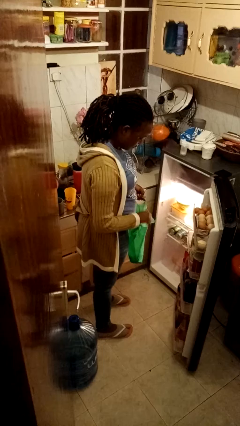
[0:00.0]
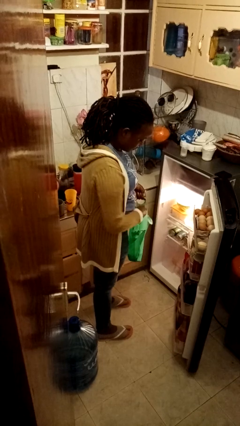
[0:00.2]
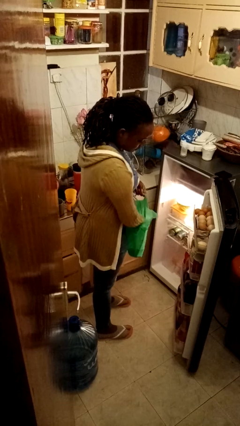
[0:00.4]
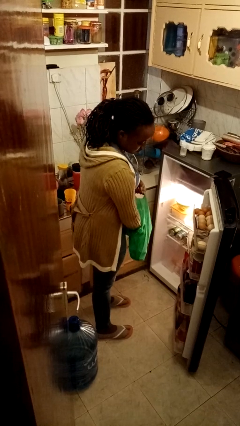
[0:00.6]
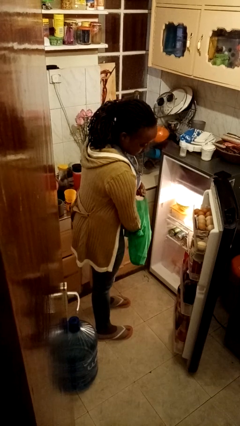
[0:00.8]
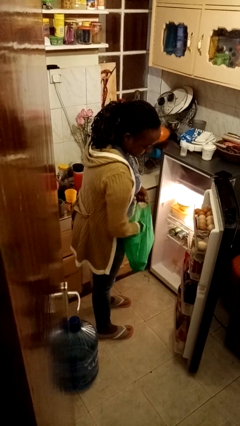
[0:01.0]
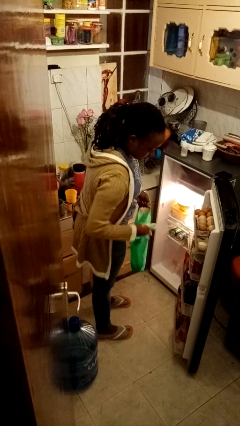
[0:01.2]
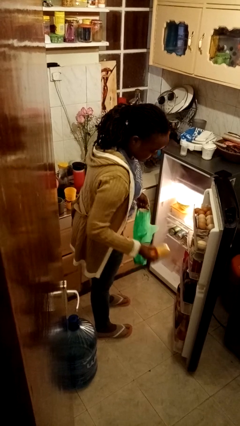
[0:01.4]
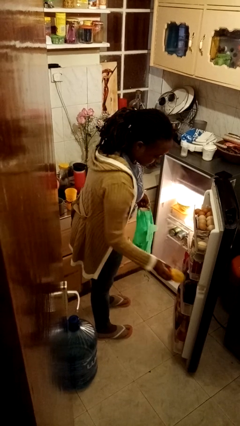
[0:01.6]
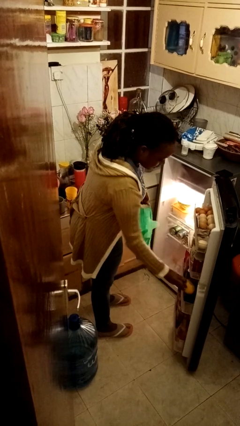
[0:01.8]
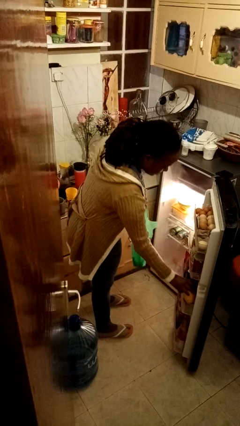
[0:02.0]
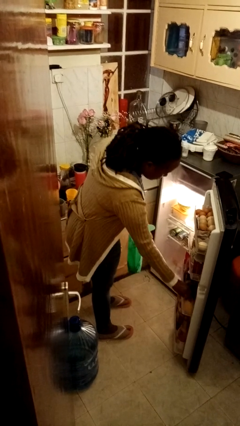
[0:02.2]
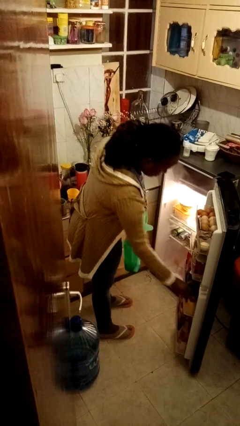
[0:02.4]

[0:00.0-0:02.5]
person loads groceries into refrigerator

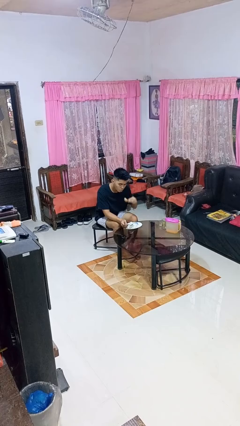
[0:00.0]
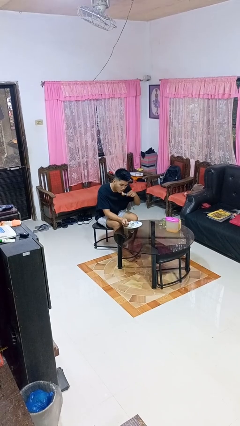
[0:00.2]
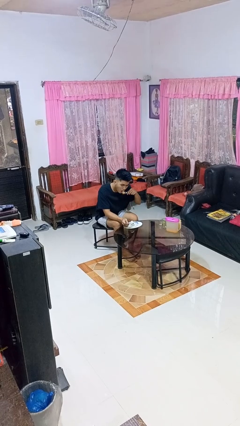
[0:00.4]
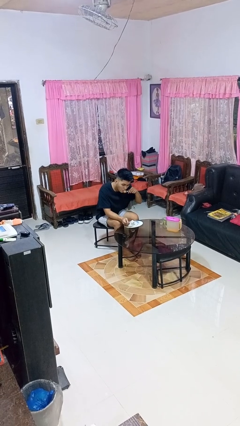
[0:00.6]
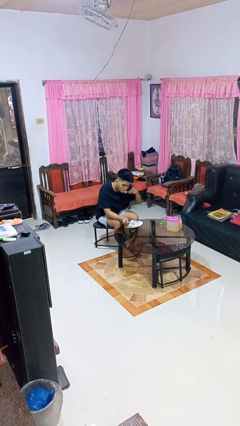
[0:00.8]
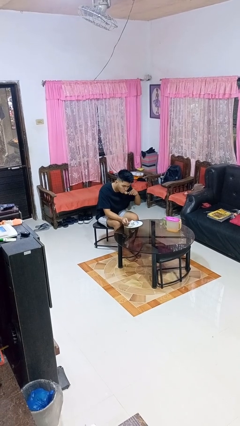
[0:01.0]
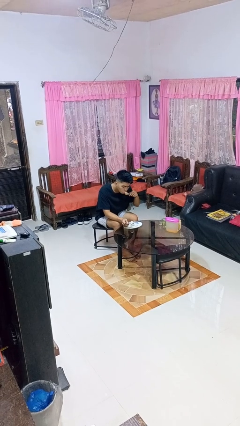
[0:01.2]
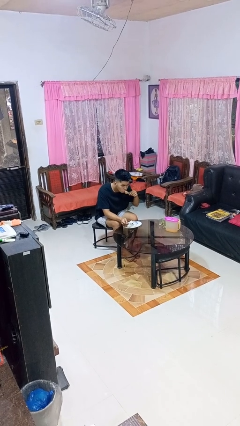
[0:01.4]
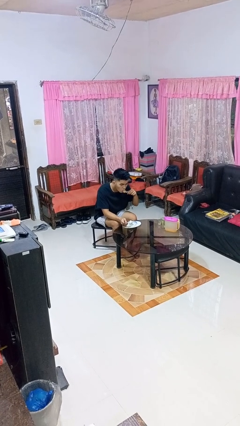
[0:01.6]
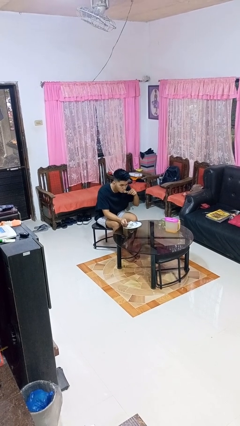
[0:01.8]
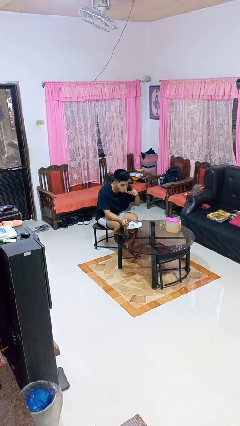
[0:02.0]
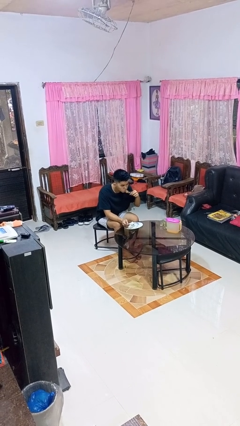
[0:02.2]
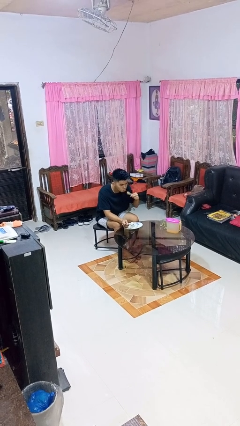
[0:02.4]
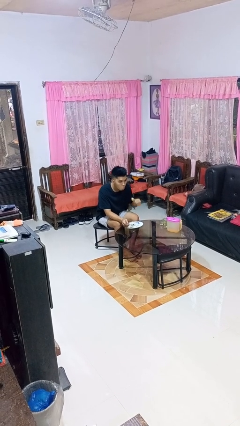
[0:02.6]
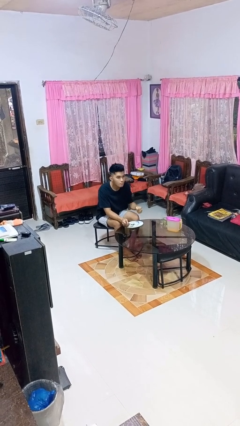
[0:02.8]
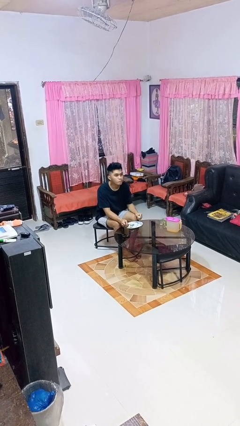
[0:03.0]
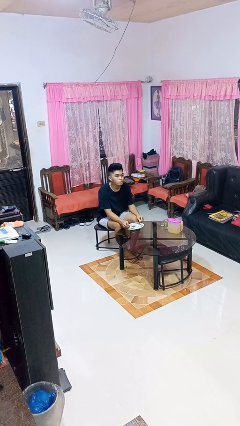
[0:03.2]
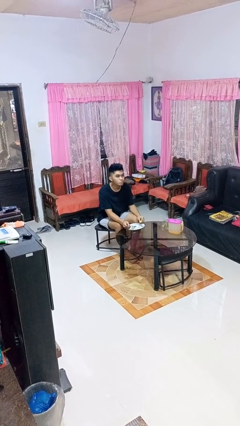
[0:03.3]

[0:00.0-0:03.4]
person eats with utensil

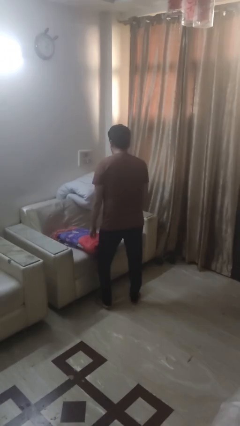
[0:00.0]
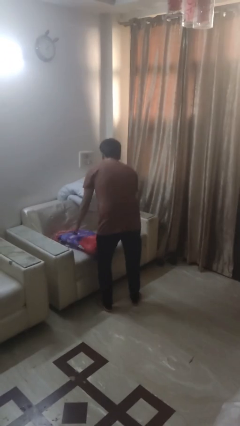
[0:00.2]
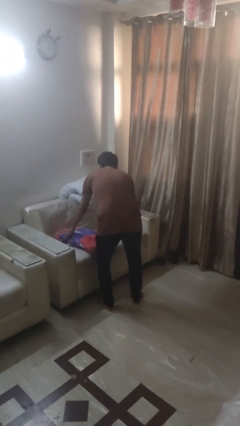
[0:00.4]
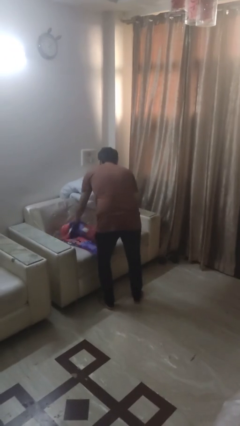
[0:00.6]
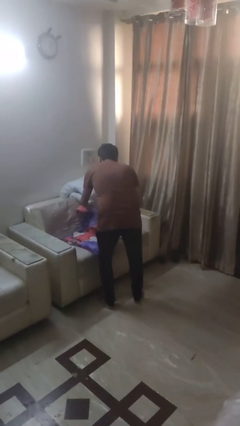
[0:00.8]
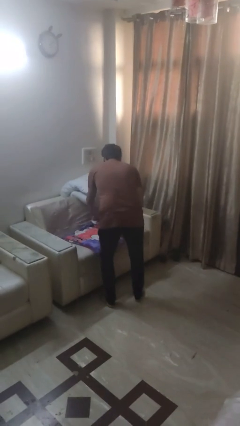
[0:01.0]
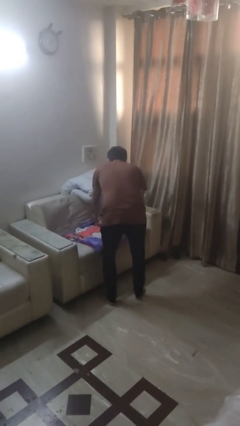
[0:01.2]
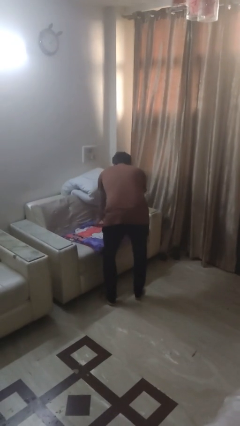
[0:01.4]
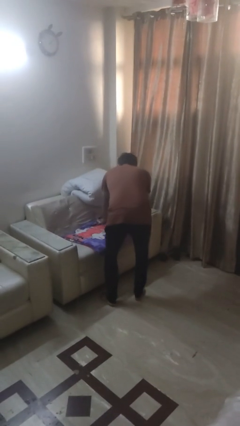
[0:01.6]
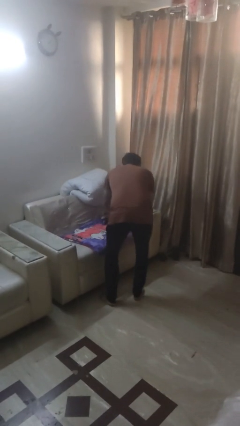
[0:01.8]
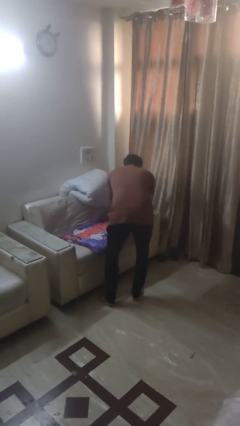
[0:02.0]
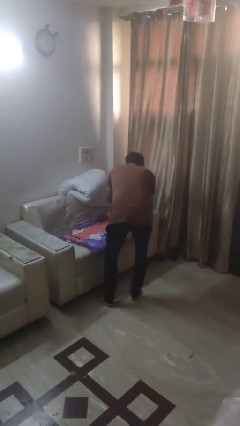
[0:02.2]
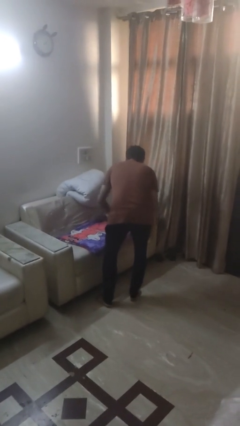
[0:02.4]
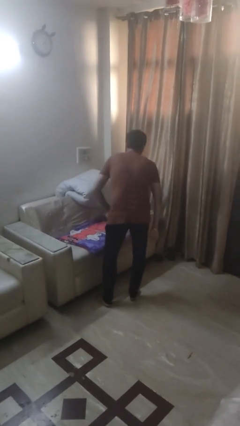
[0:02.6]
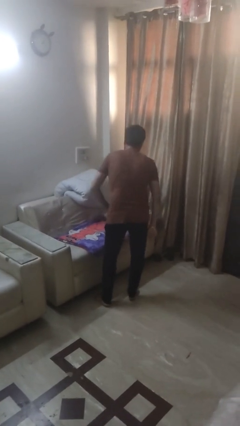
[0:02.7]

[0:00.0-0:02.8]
person unfolds blanket

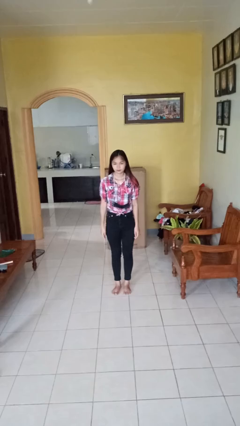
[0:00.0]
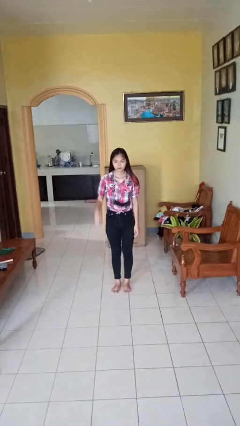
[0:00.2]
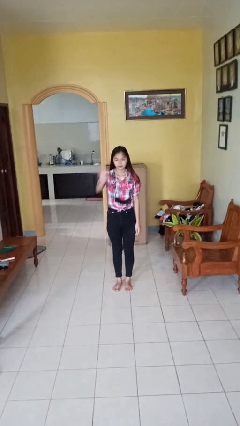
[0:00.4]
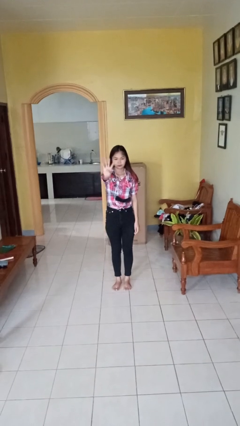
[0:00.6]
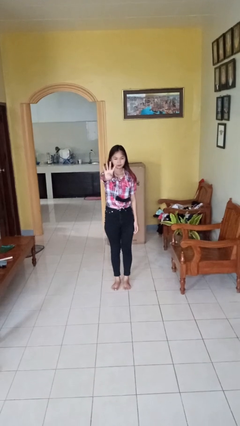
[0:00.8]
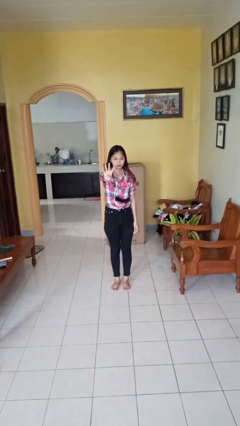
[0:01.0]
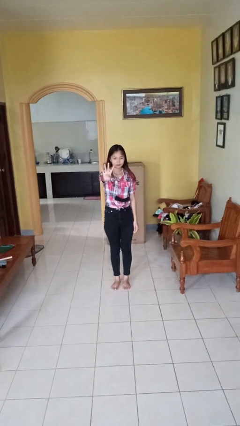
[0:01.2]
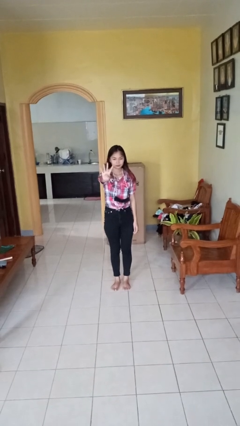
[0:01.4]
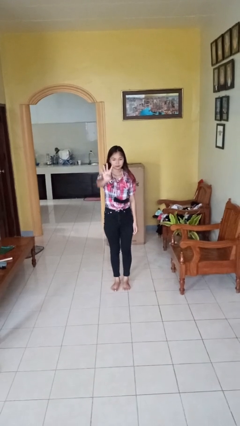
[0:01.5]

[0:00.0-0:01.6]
person gestures number four

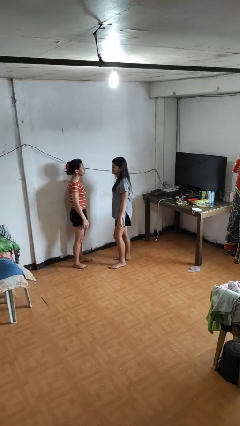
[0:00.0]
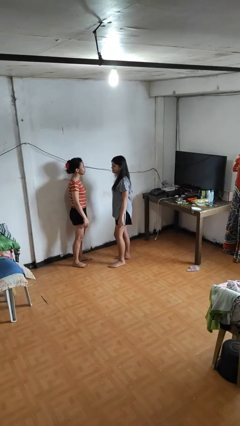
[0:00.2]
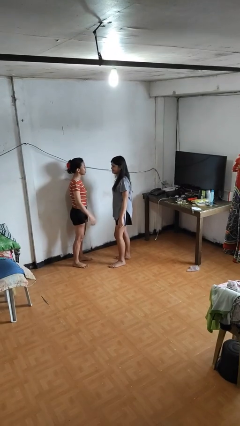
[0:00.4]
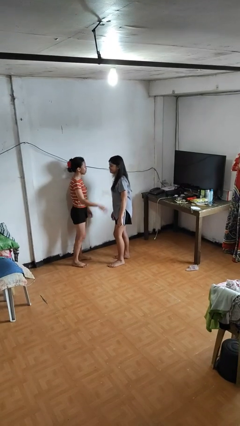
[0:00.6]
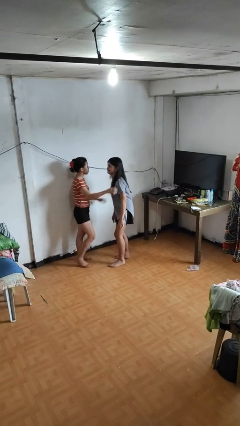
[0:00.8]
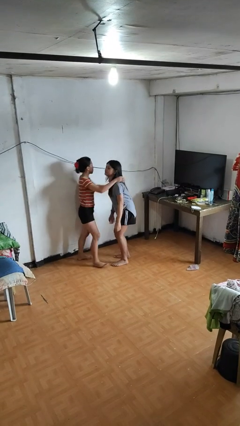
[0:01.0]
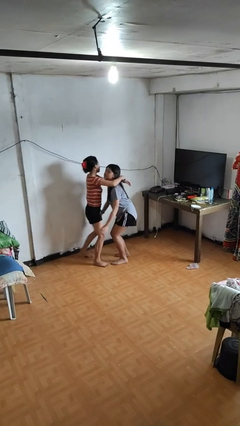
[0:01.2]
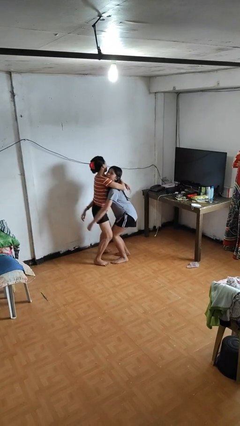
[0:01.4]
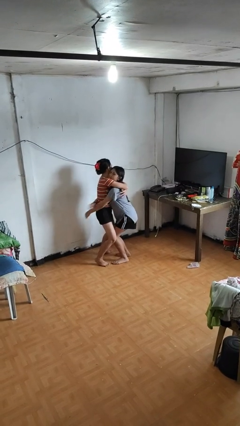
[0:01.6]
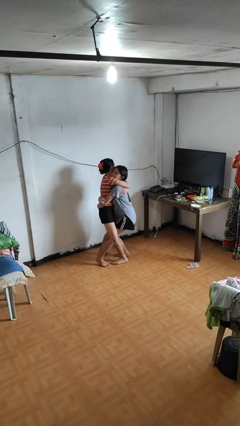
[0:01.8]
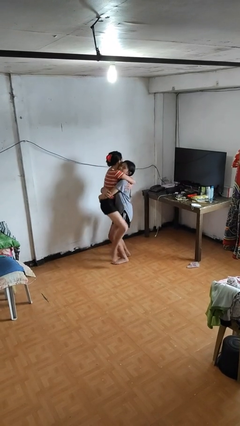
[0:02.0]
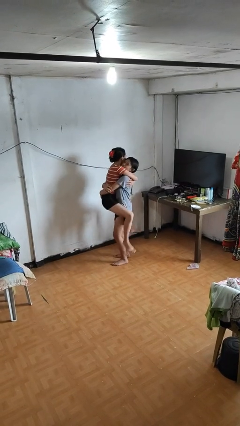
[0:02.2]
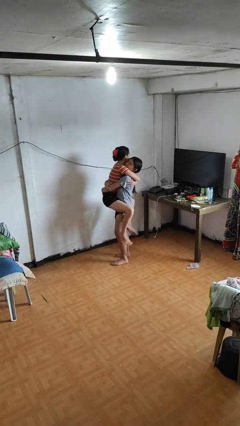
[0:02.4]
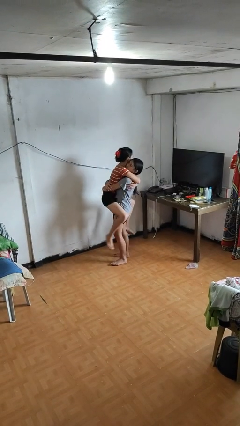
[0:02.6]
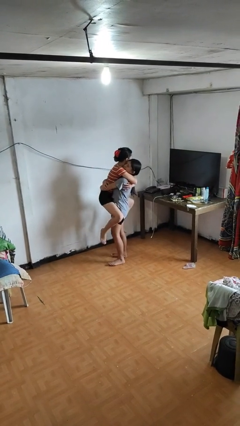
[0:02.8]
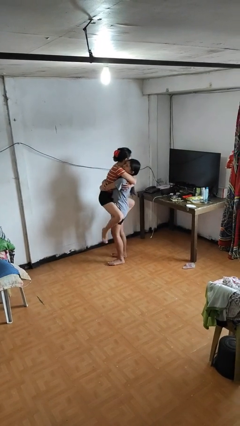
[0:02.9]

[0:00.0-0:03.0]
person picks up person

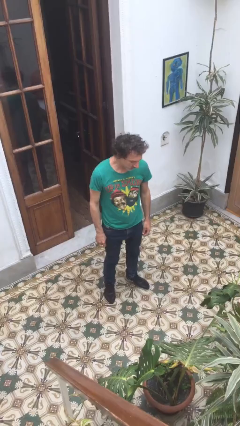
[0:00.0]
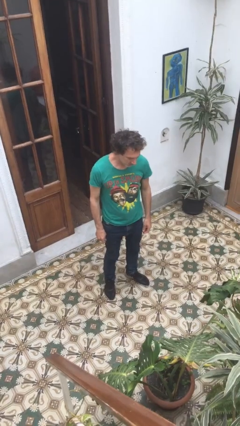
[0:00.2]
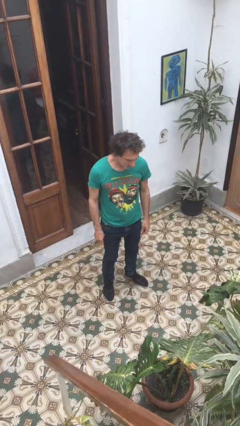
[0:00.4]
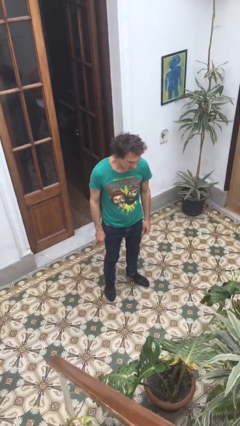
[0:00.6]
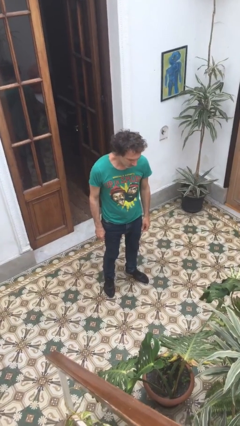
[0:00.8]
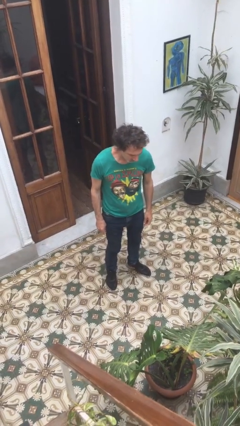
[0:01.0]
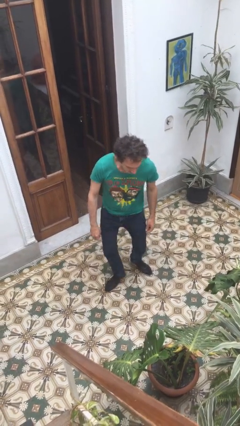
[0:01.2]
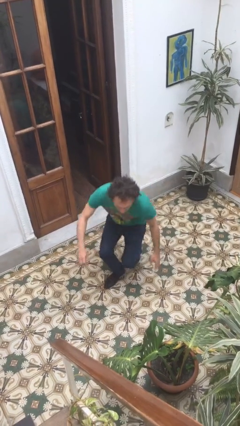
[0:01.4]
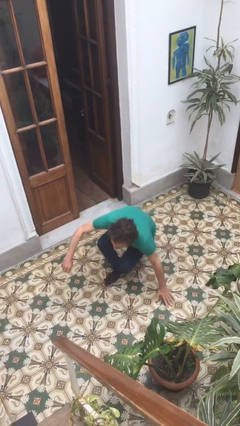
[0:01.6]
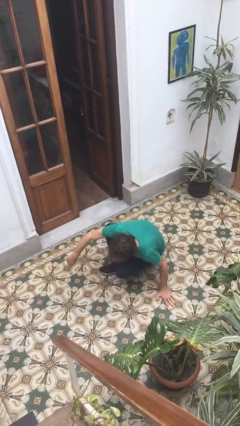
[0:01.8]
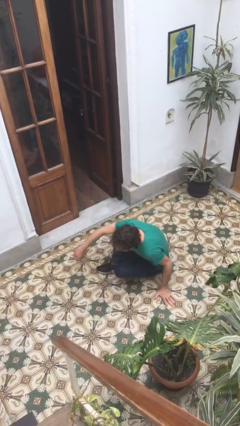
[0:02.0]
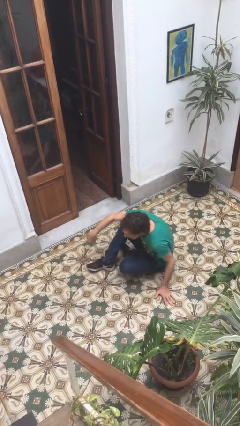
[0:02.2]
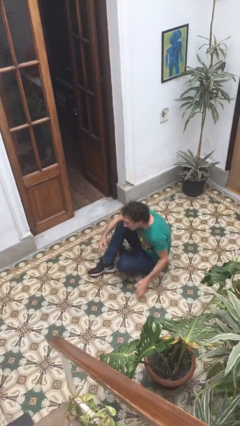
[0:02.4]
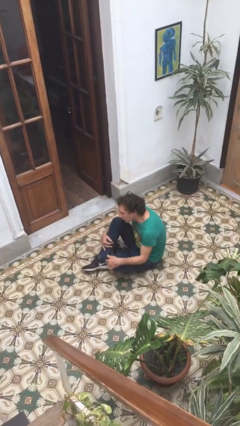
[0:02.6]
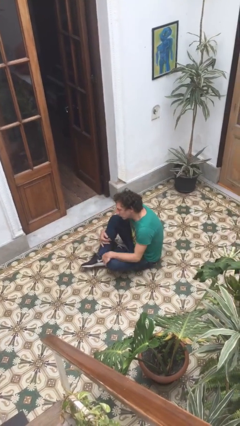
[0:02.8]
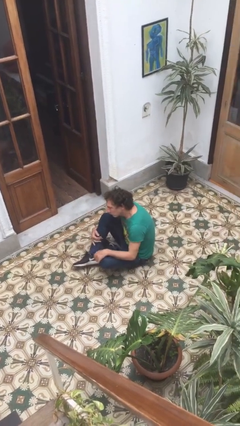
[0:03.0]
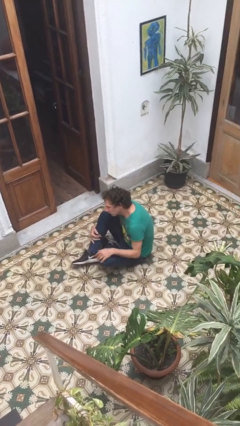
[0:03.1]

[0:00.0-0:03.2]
person sits down

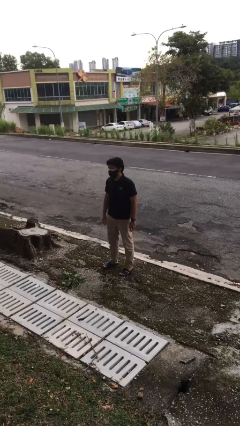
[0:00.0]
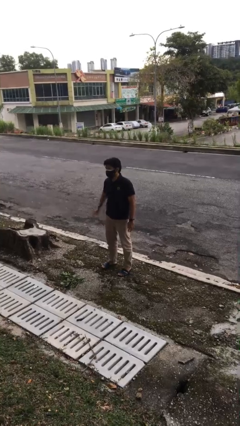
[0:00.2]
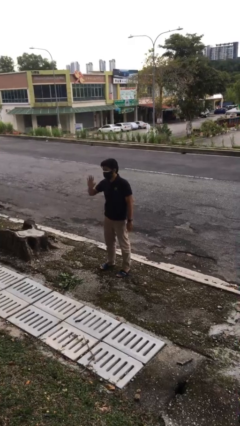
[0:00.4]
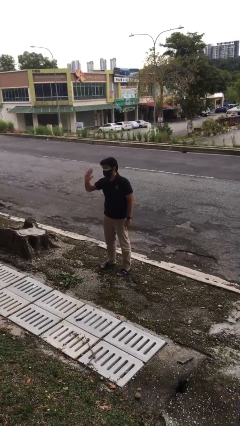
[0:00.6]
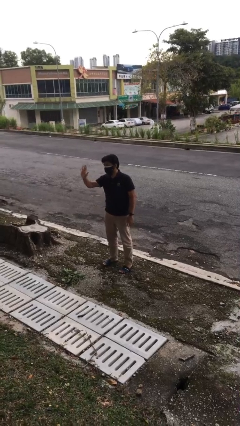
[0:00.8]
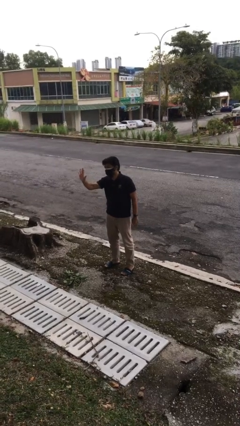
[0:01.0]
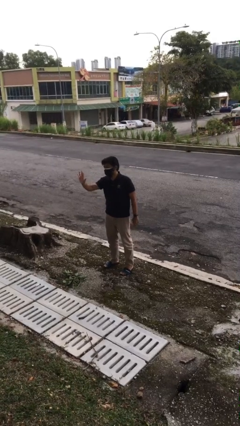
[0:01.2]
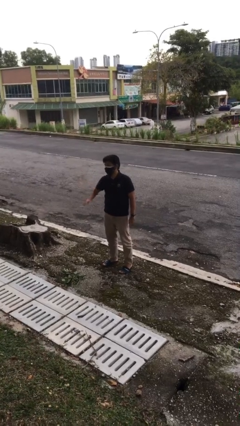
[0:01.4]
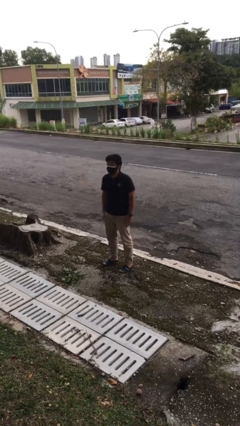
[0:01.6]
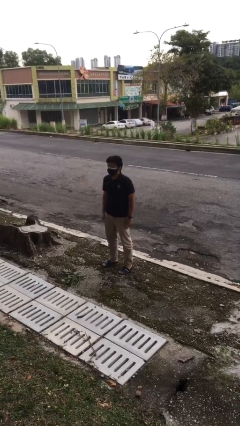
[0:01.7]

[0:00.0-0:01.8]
person gestures number five
